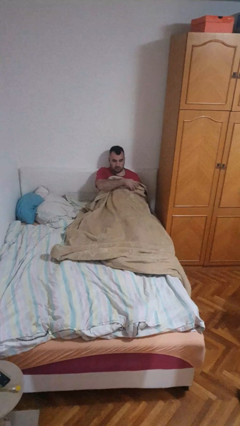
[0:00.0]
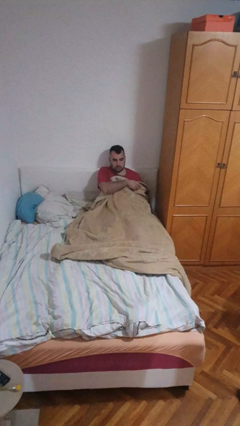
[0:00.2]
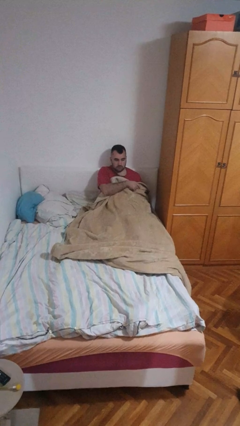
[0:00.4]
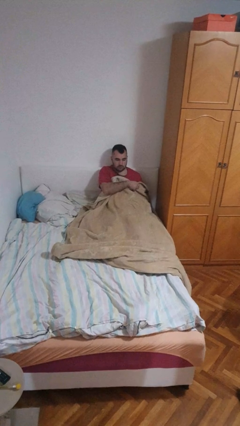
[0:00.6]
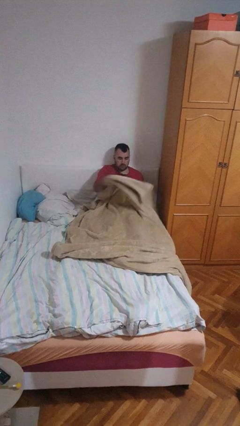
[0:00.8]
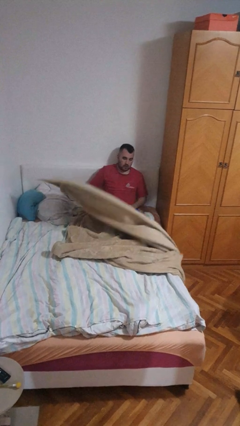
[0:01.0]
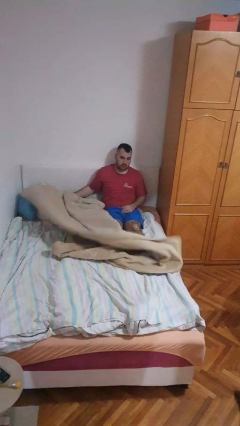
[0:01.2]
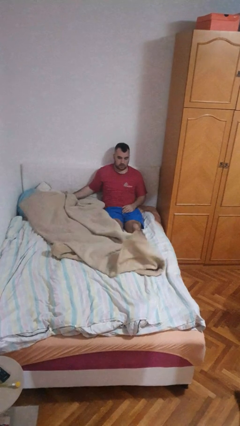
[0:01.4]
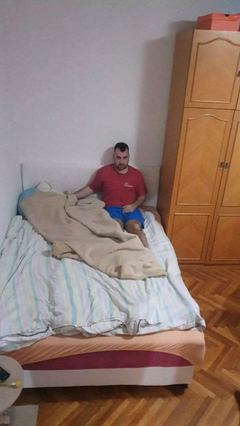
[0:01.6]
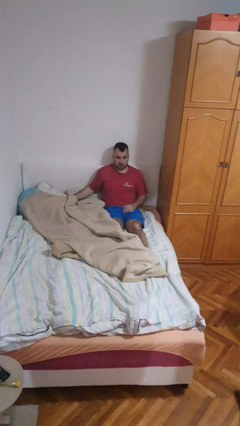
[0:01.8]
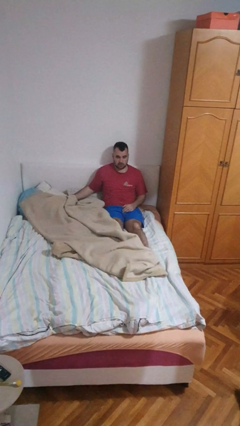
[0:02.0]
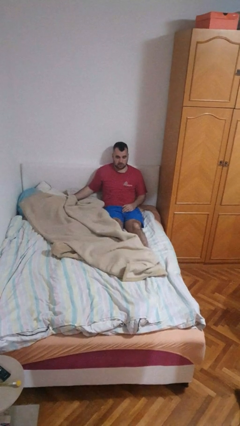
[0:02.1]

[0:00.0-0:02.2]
person uncovers with blanket

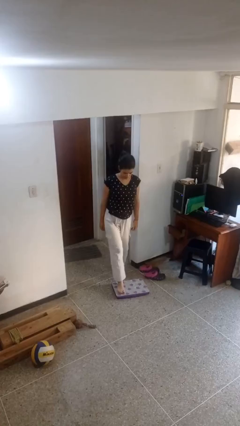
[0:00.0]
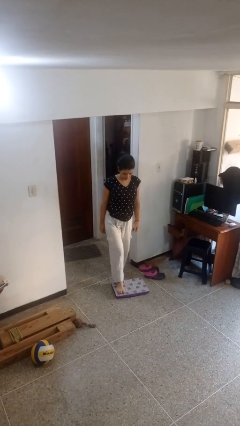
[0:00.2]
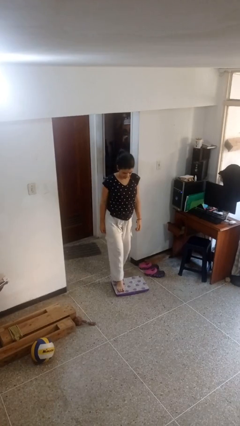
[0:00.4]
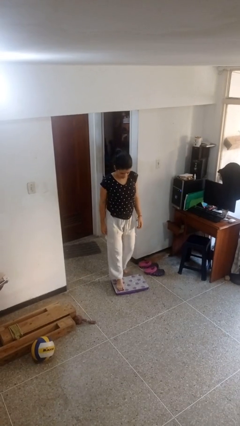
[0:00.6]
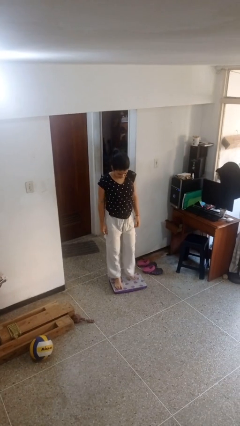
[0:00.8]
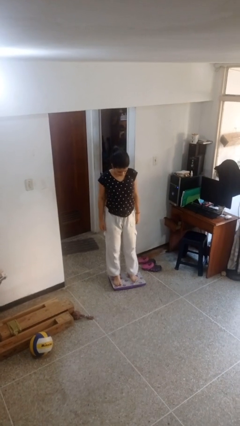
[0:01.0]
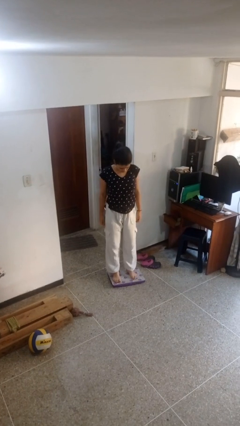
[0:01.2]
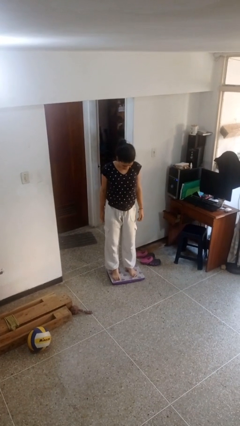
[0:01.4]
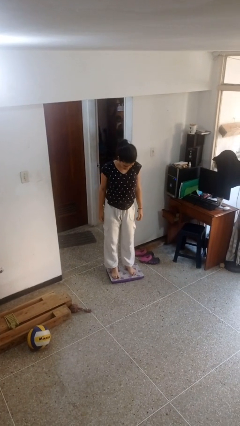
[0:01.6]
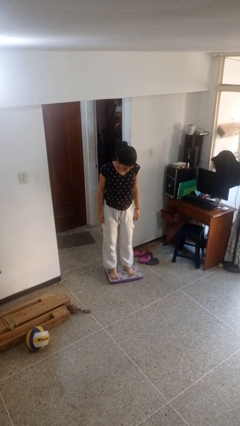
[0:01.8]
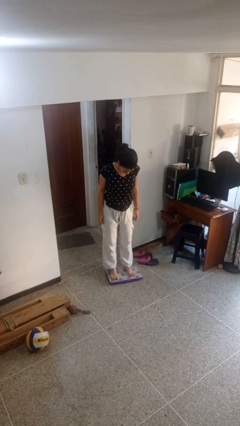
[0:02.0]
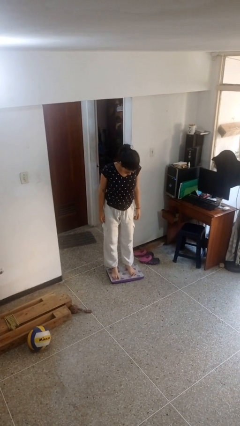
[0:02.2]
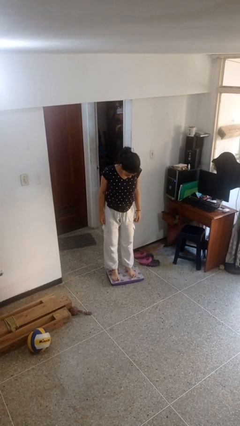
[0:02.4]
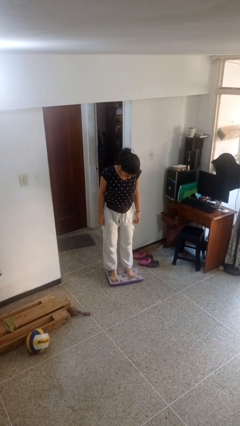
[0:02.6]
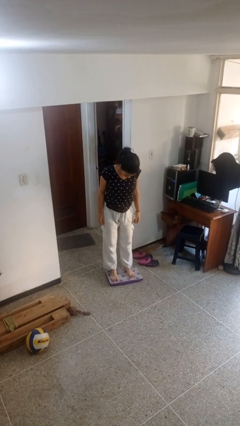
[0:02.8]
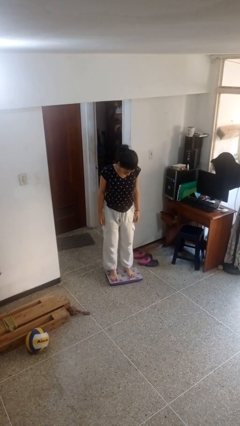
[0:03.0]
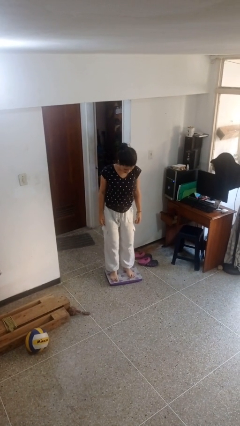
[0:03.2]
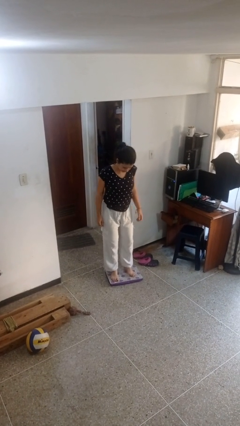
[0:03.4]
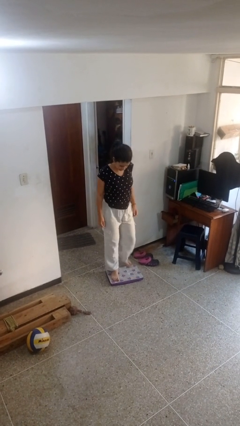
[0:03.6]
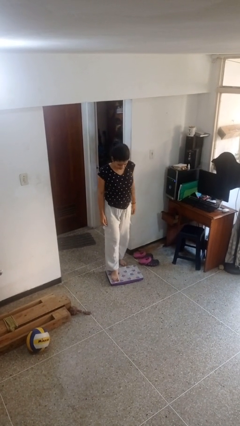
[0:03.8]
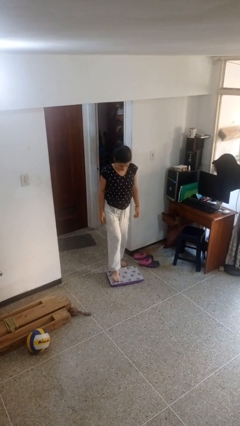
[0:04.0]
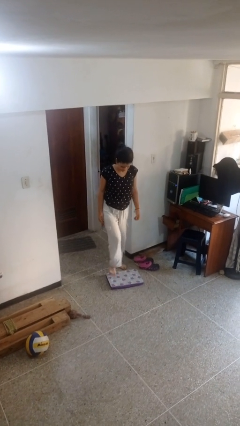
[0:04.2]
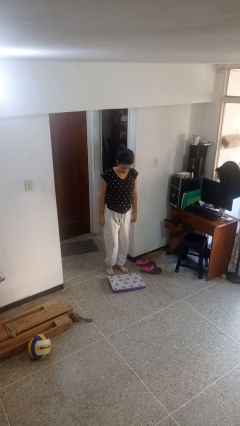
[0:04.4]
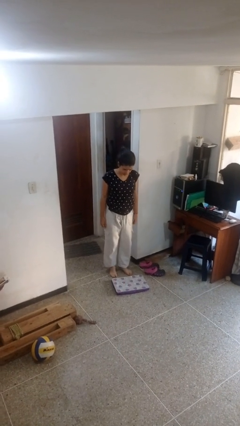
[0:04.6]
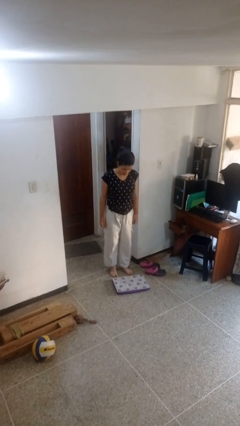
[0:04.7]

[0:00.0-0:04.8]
person uses bodyweight scale

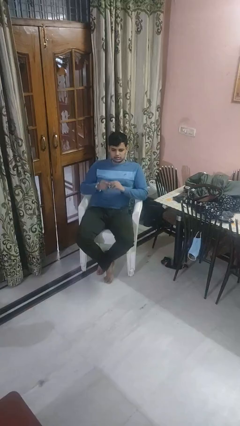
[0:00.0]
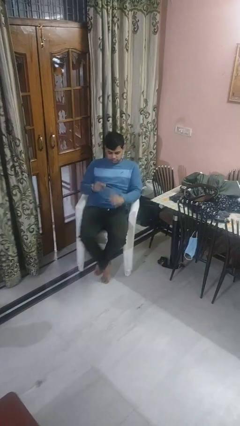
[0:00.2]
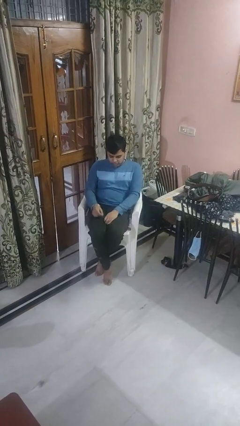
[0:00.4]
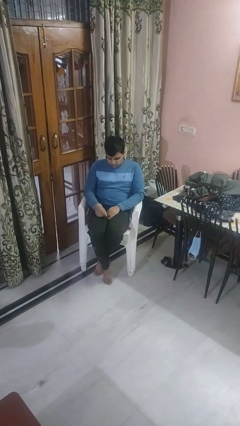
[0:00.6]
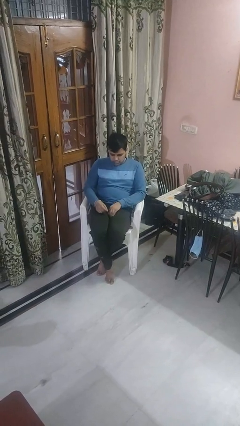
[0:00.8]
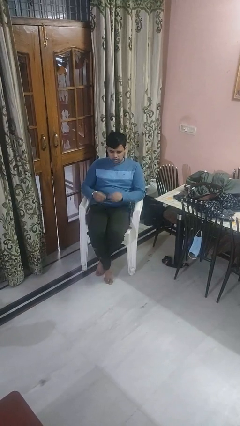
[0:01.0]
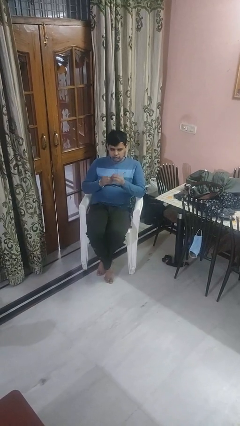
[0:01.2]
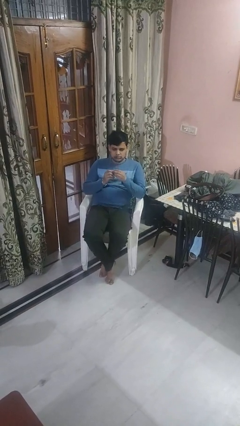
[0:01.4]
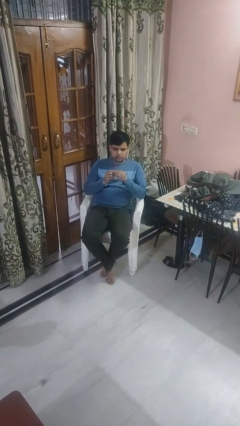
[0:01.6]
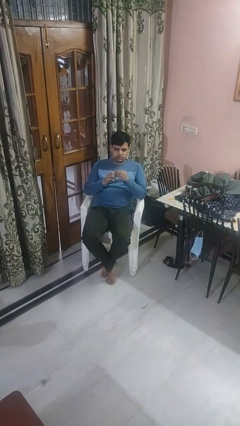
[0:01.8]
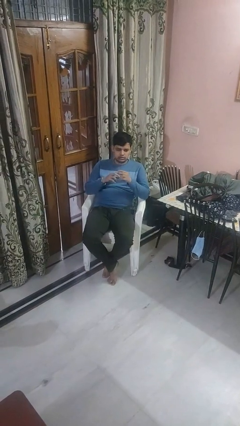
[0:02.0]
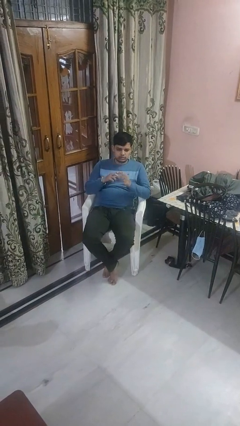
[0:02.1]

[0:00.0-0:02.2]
person puts on ring

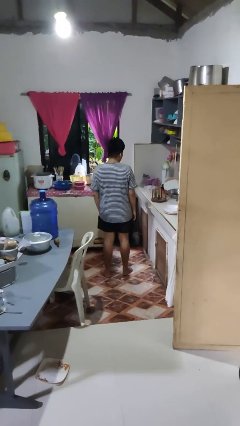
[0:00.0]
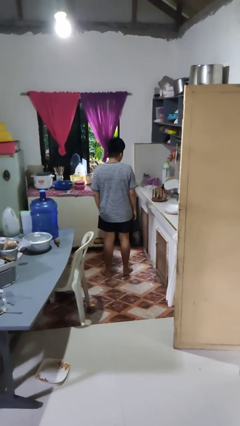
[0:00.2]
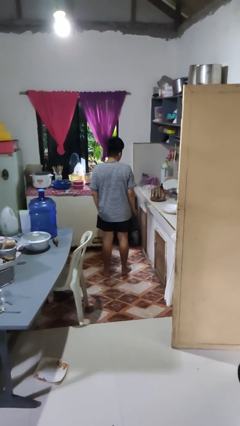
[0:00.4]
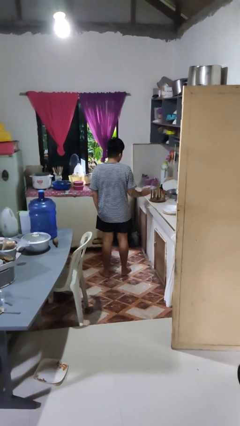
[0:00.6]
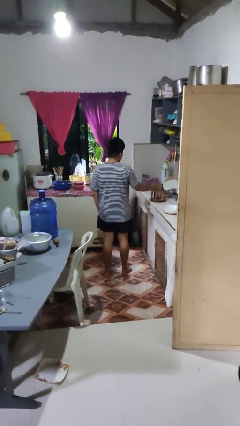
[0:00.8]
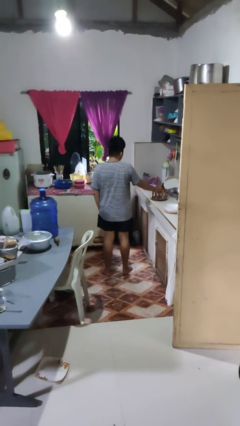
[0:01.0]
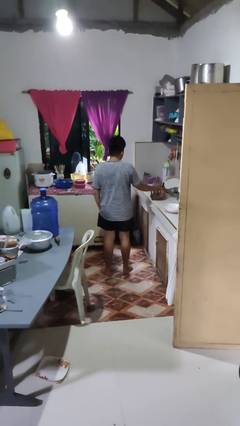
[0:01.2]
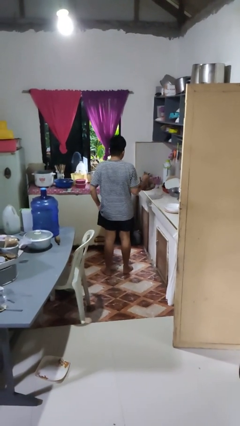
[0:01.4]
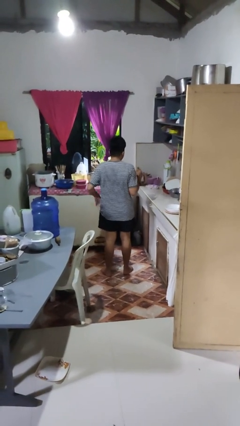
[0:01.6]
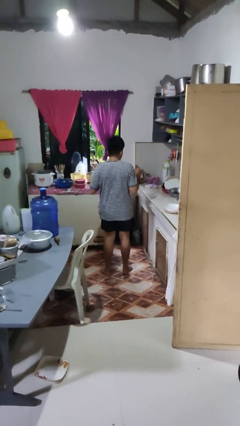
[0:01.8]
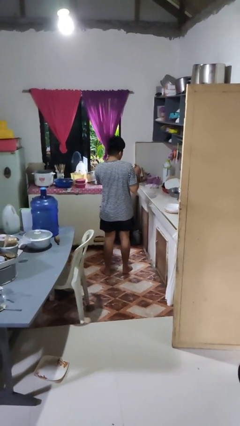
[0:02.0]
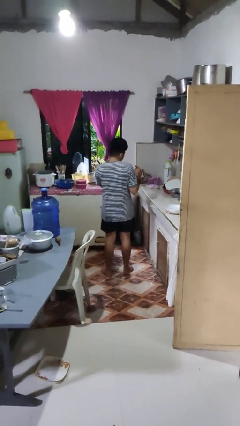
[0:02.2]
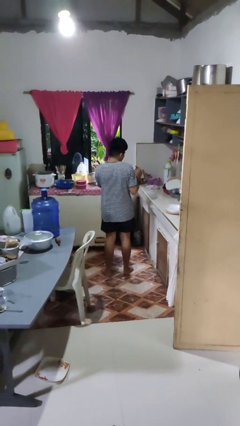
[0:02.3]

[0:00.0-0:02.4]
person picks up object from countertop

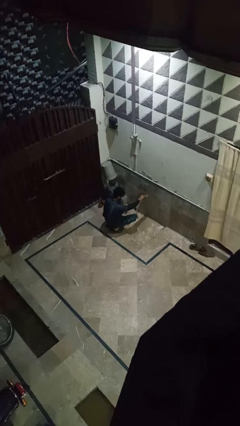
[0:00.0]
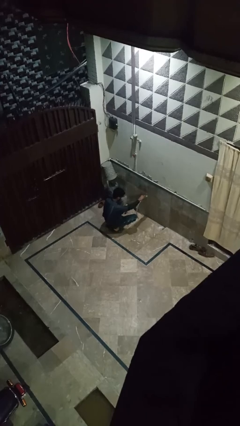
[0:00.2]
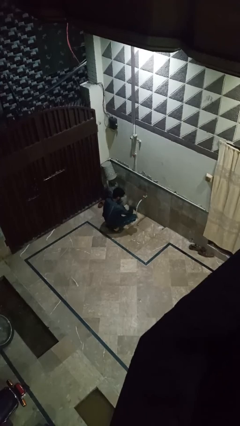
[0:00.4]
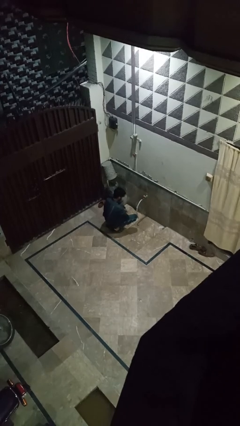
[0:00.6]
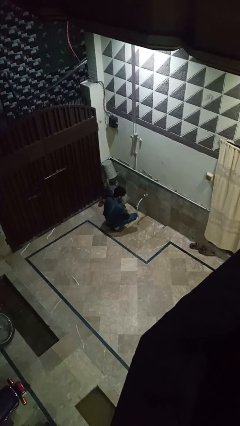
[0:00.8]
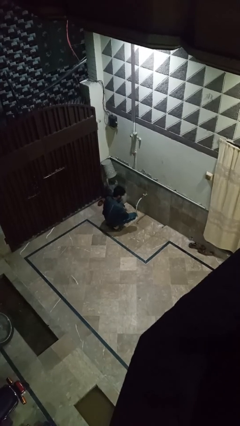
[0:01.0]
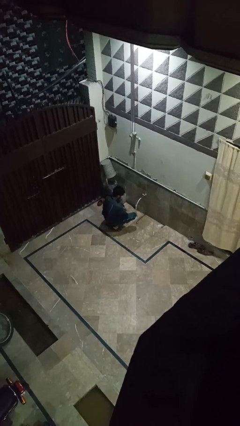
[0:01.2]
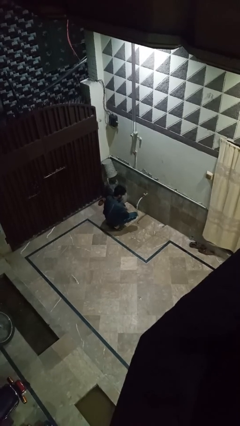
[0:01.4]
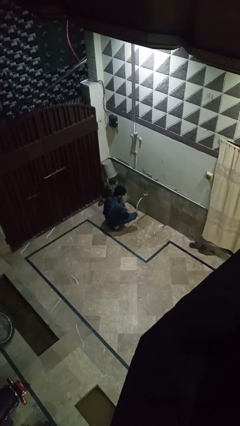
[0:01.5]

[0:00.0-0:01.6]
person turns off faucet

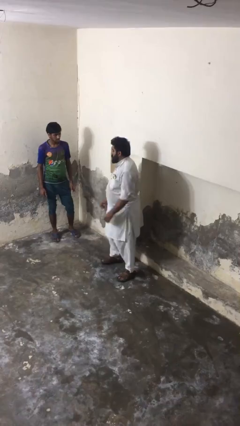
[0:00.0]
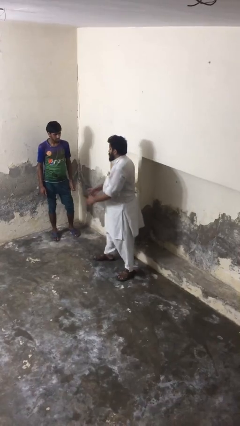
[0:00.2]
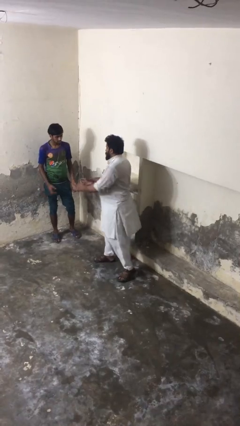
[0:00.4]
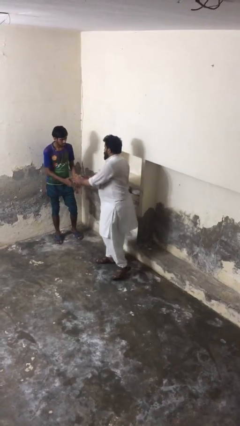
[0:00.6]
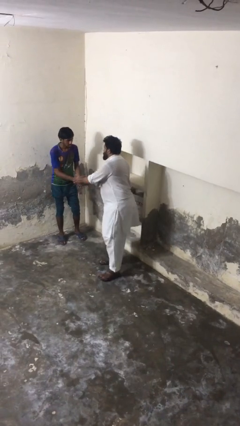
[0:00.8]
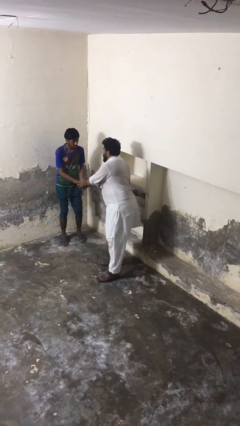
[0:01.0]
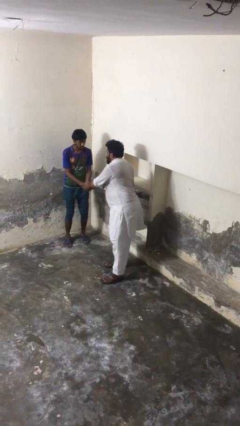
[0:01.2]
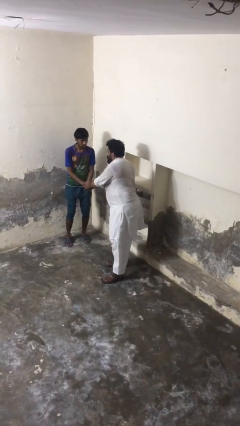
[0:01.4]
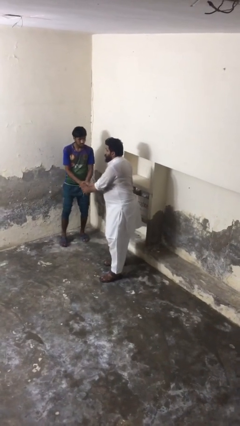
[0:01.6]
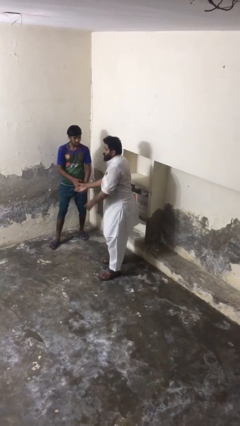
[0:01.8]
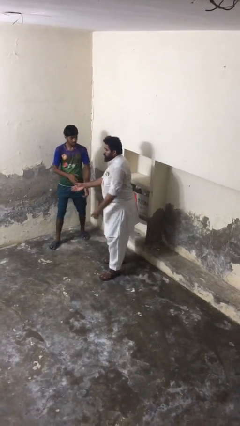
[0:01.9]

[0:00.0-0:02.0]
person shakes hand

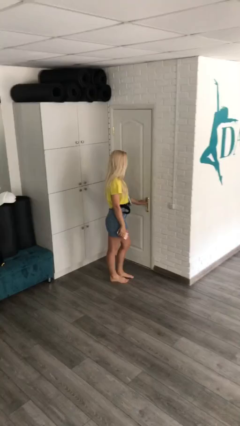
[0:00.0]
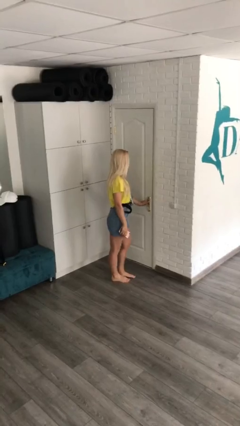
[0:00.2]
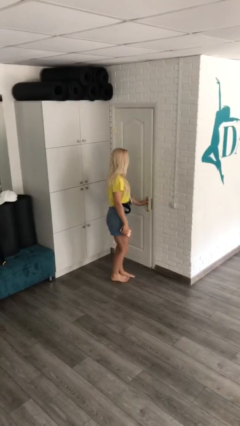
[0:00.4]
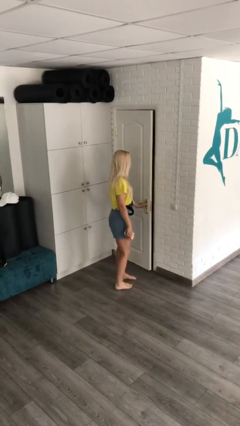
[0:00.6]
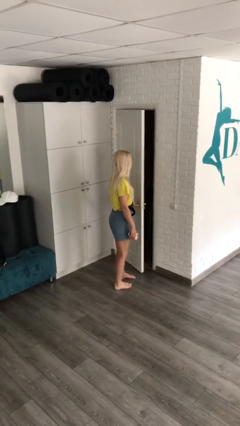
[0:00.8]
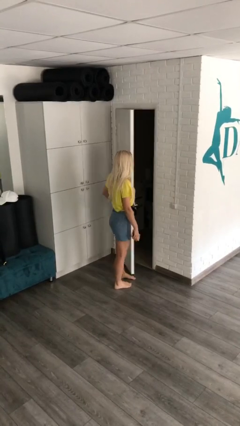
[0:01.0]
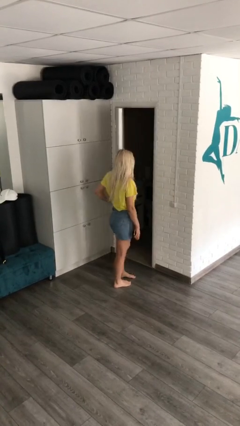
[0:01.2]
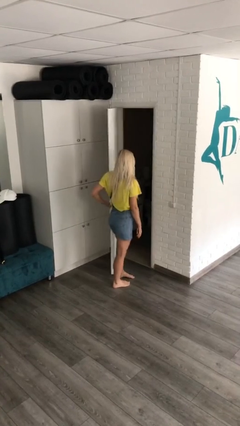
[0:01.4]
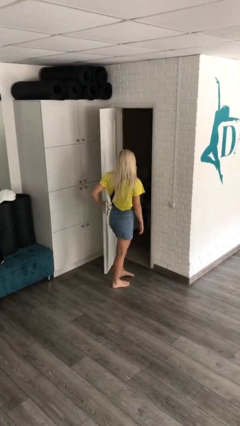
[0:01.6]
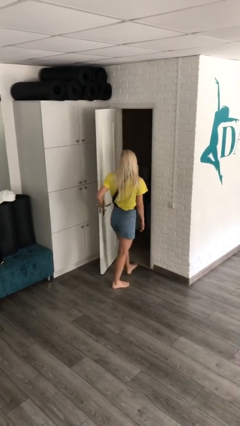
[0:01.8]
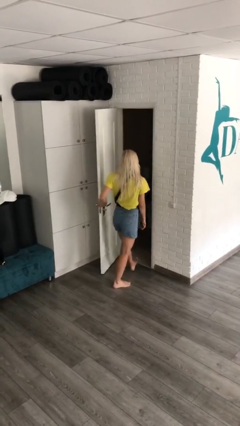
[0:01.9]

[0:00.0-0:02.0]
person opens facility door

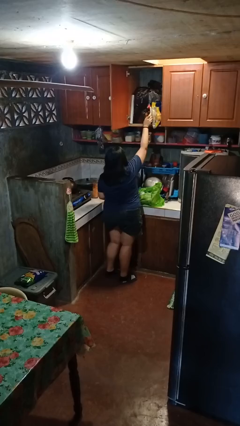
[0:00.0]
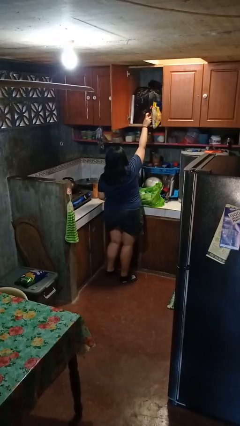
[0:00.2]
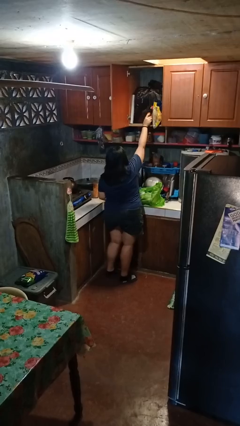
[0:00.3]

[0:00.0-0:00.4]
person loads groceries into cabinet
